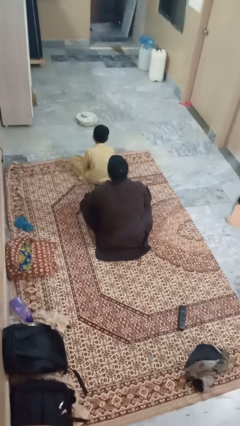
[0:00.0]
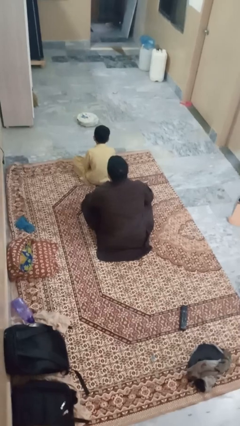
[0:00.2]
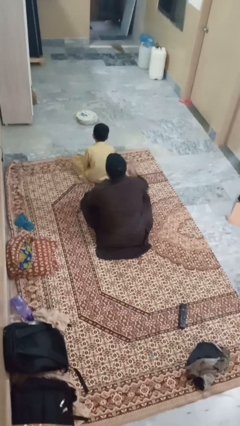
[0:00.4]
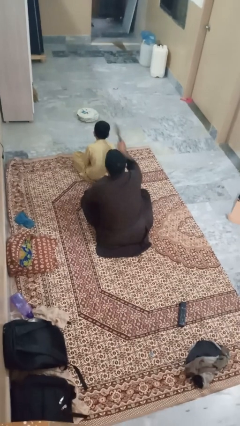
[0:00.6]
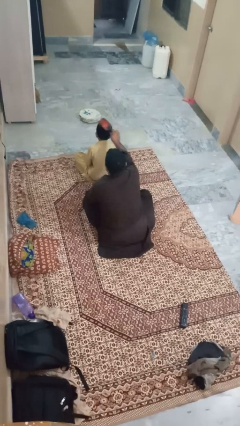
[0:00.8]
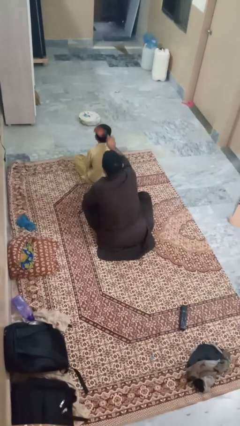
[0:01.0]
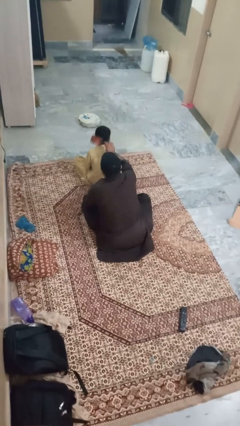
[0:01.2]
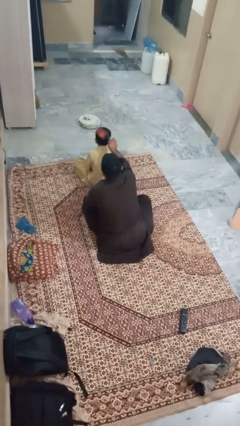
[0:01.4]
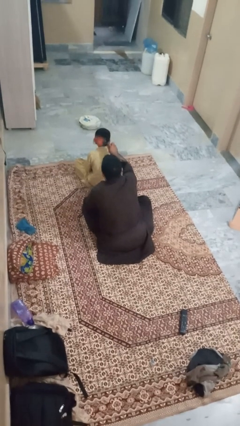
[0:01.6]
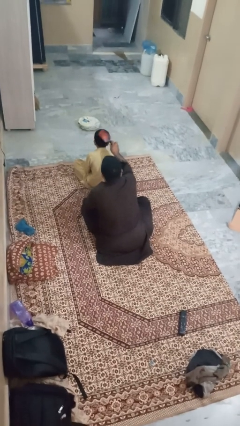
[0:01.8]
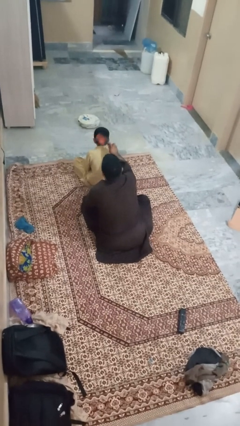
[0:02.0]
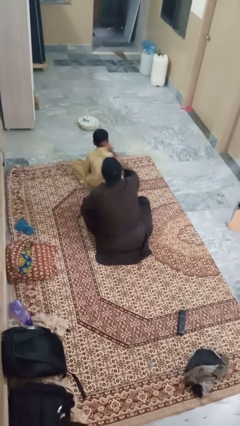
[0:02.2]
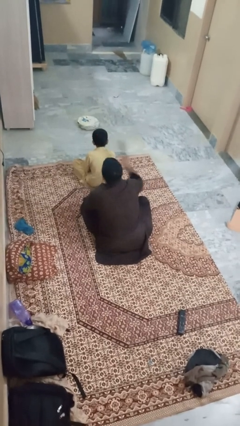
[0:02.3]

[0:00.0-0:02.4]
person brushes hair of person

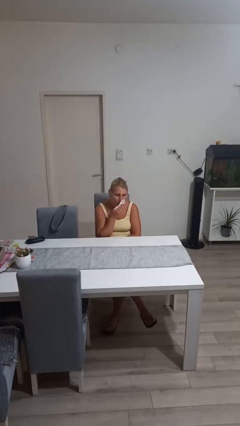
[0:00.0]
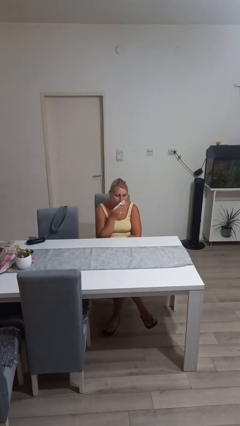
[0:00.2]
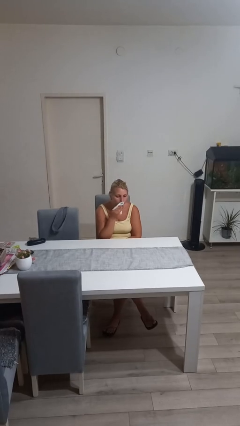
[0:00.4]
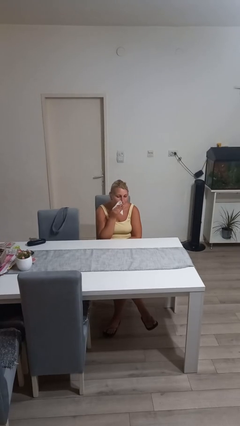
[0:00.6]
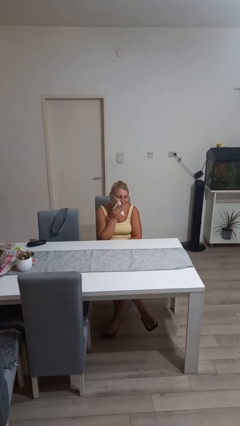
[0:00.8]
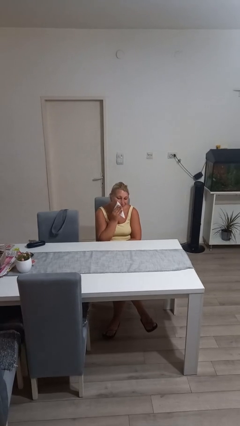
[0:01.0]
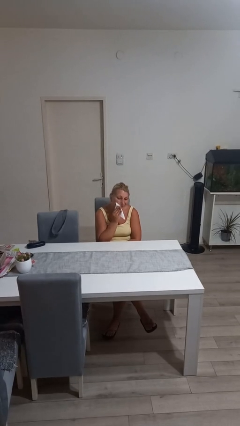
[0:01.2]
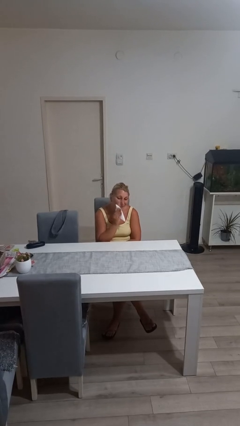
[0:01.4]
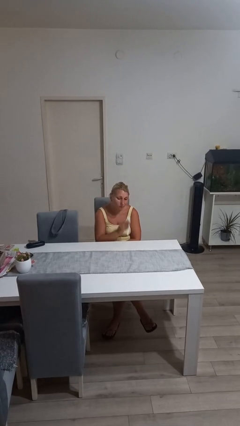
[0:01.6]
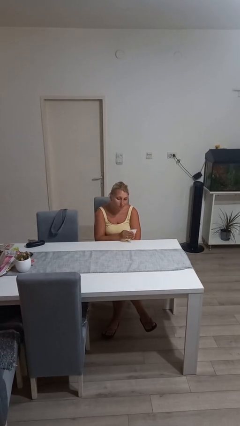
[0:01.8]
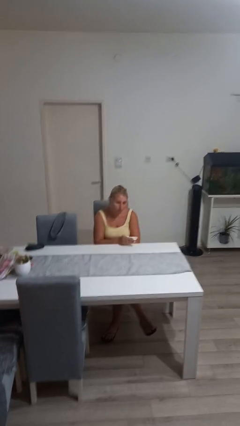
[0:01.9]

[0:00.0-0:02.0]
person wipes mouth with napkin

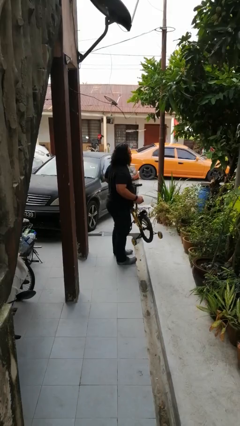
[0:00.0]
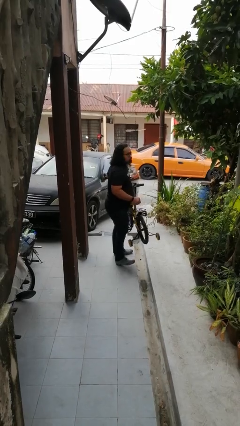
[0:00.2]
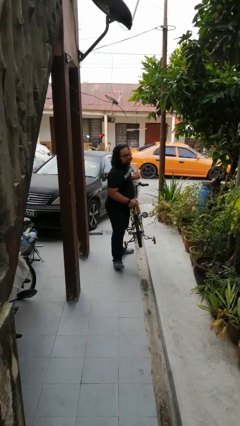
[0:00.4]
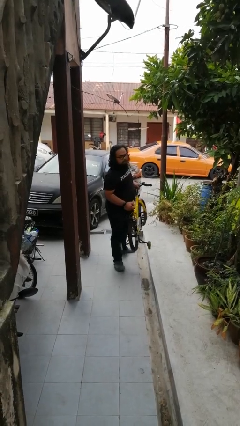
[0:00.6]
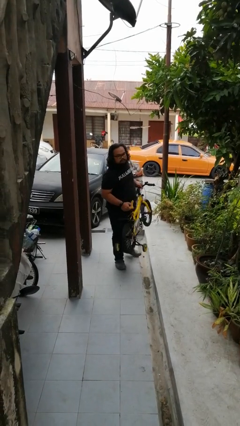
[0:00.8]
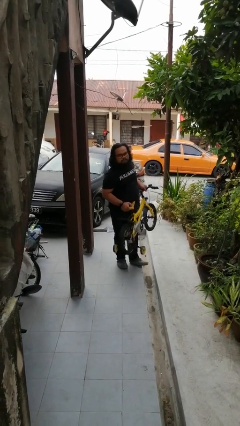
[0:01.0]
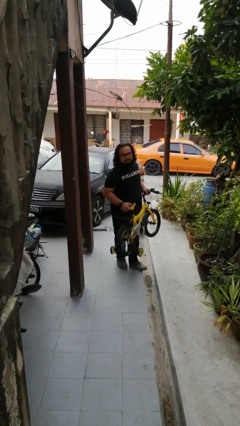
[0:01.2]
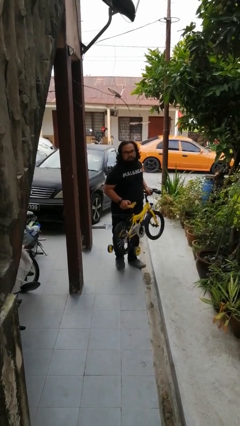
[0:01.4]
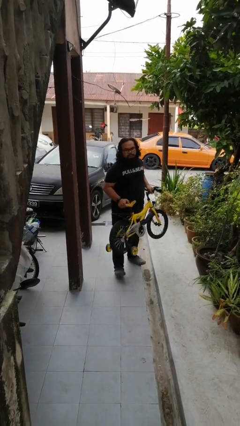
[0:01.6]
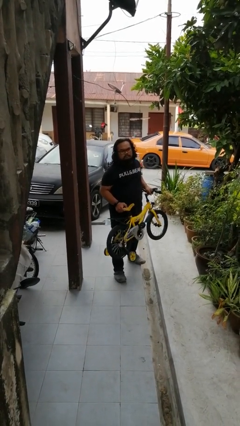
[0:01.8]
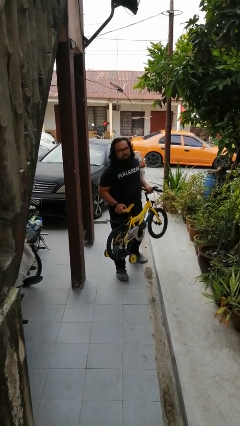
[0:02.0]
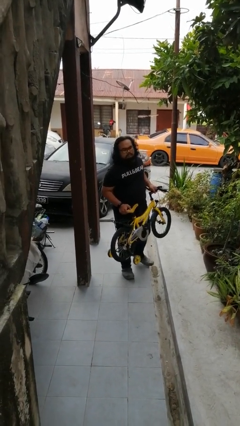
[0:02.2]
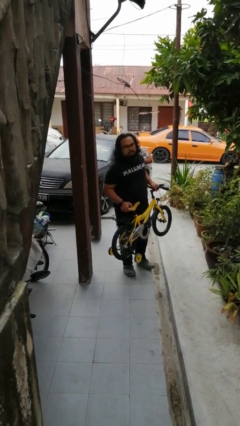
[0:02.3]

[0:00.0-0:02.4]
person carries bicycle

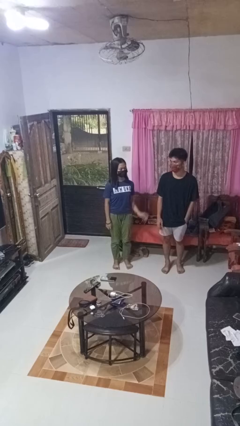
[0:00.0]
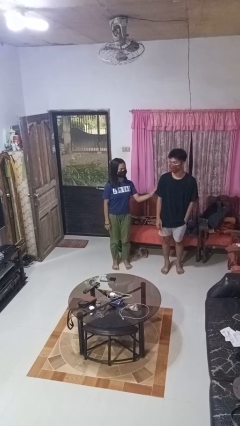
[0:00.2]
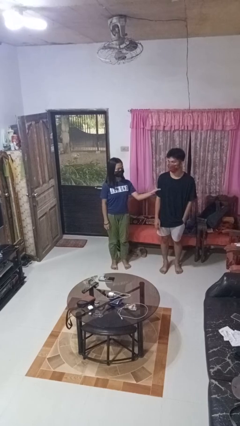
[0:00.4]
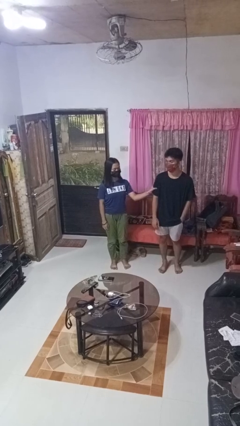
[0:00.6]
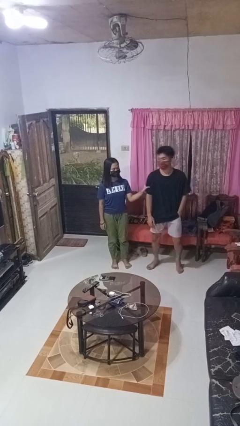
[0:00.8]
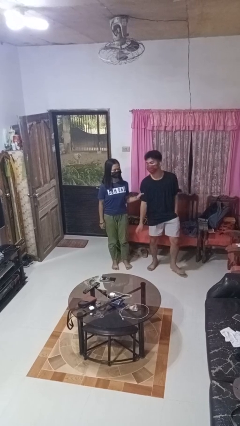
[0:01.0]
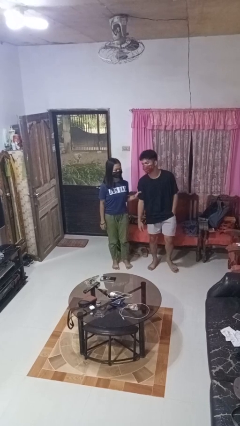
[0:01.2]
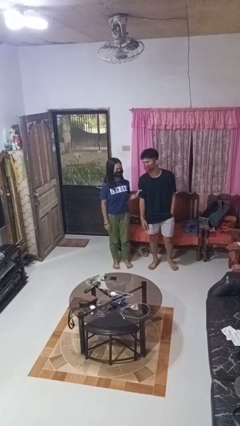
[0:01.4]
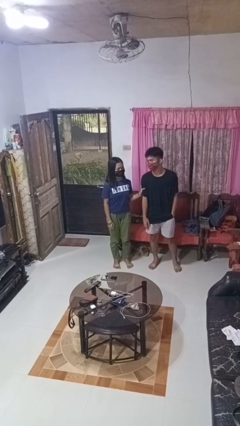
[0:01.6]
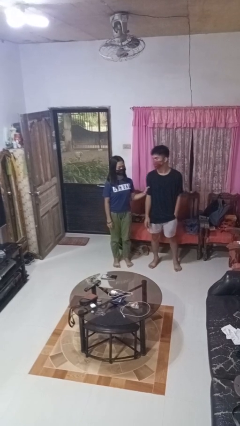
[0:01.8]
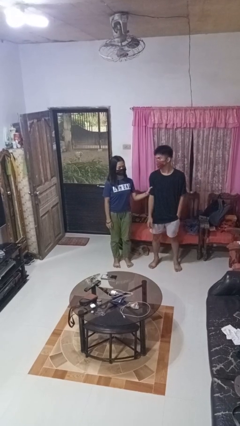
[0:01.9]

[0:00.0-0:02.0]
person grabs person by bicep

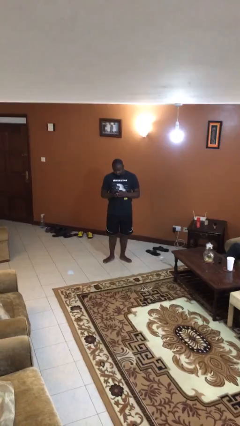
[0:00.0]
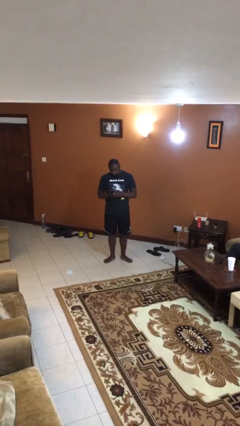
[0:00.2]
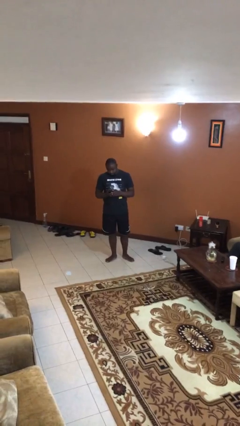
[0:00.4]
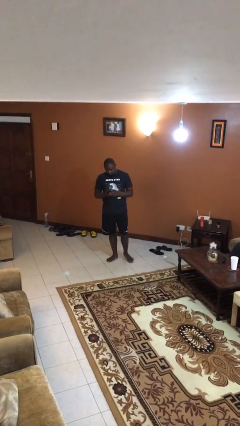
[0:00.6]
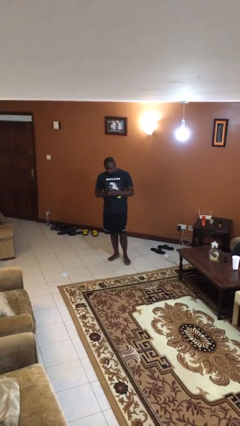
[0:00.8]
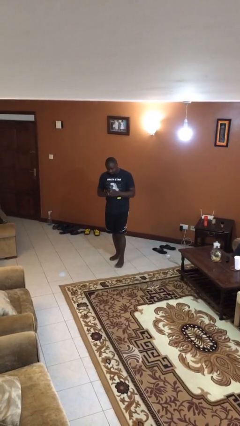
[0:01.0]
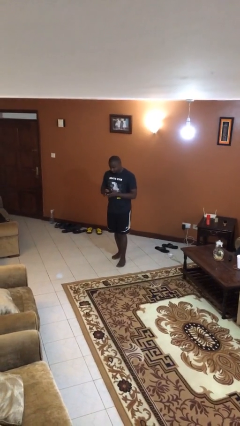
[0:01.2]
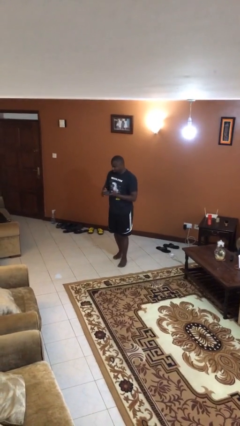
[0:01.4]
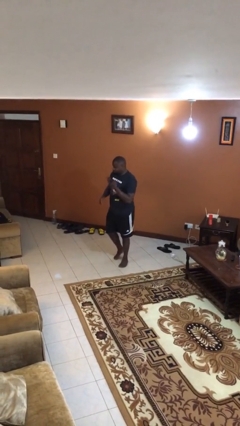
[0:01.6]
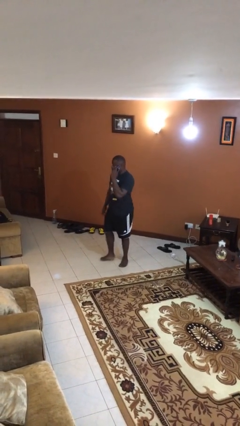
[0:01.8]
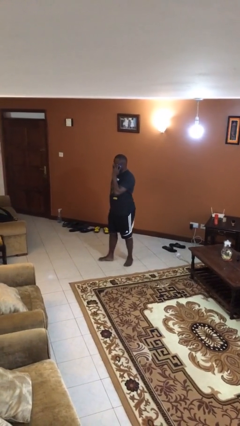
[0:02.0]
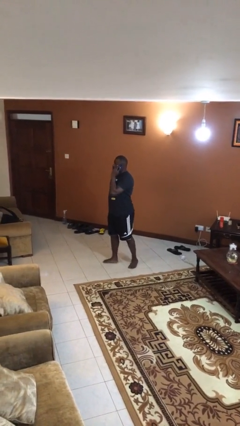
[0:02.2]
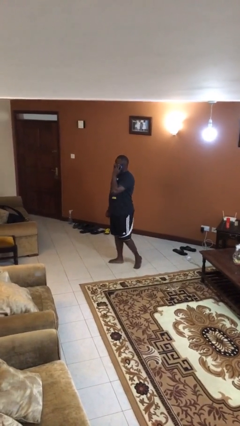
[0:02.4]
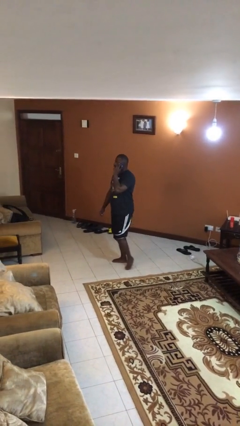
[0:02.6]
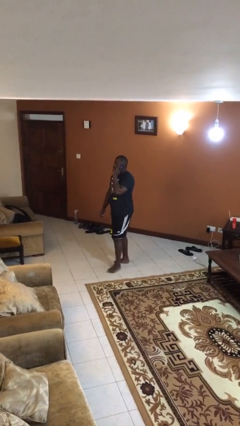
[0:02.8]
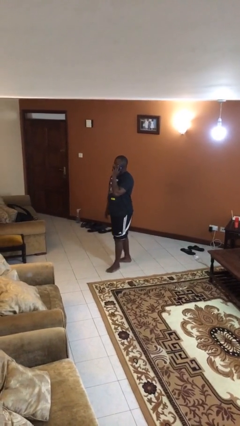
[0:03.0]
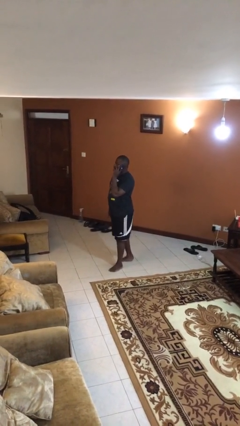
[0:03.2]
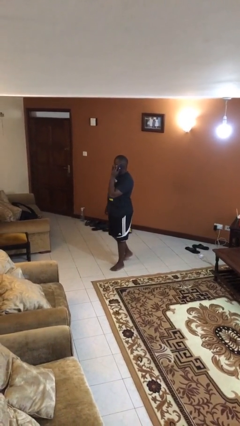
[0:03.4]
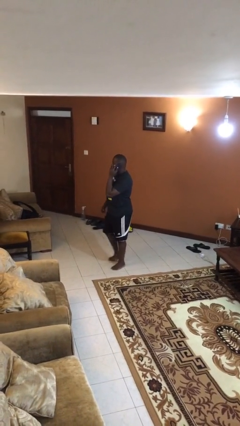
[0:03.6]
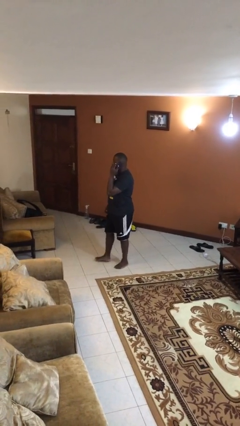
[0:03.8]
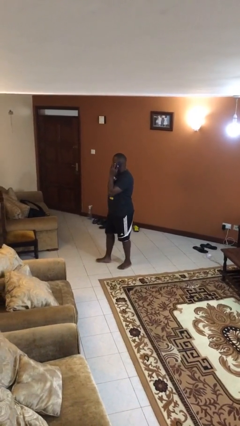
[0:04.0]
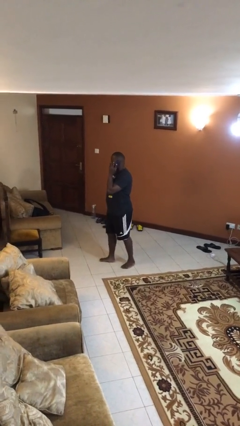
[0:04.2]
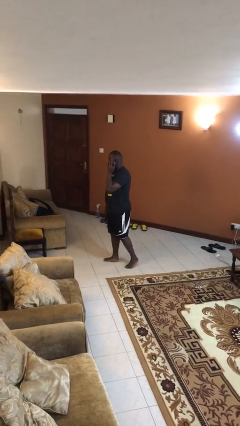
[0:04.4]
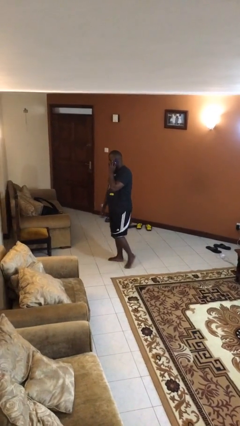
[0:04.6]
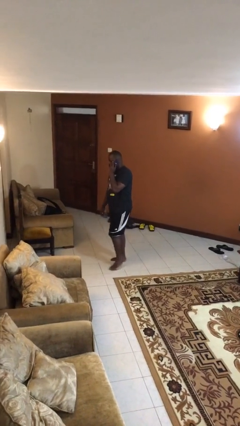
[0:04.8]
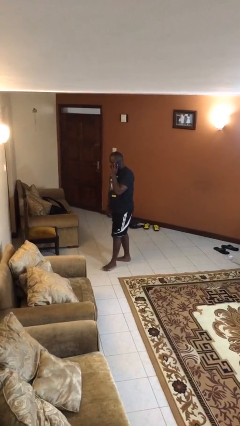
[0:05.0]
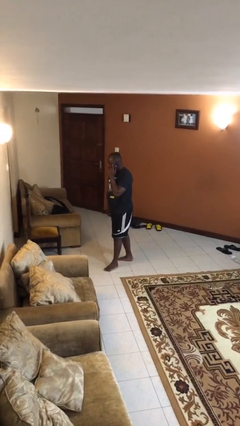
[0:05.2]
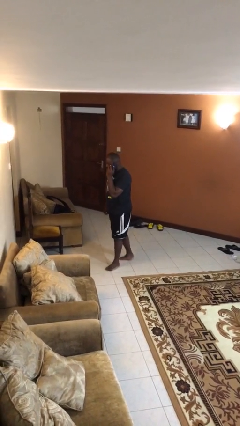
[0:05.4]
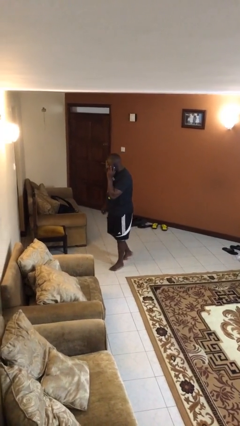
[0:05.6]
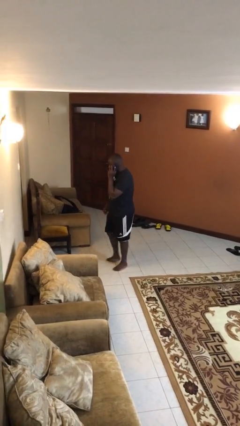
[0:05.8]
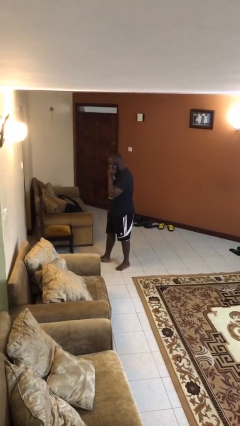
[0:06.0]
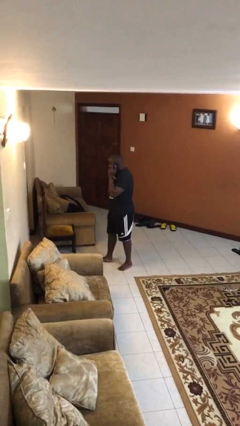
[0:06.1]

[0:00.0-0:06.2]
person talks on phone

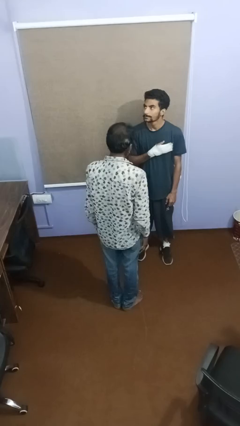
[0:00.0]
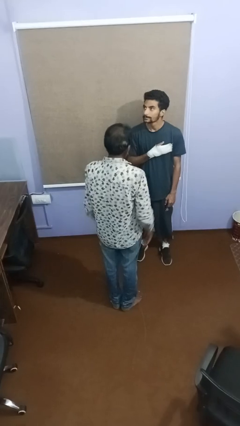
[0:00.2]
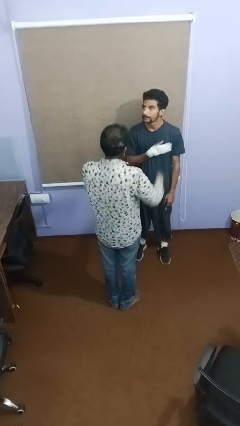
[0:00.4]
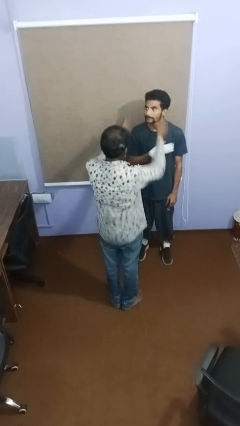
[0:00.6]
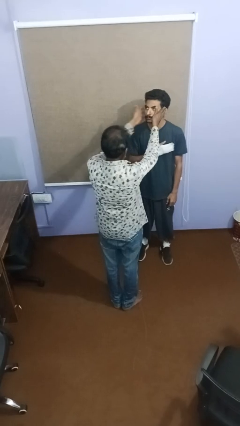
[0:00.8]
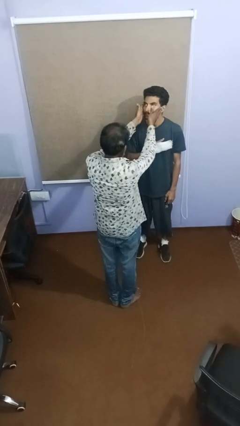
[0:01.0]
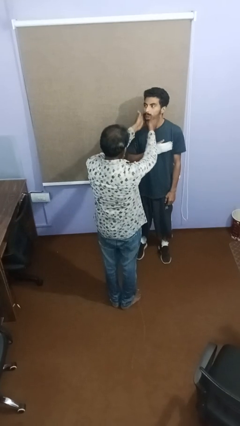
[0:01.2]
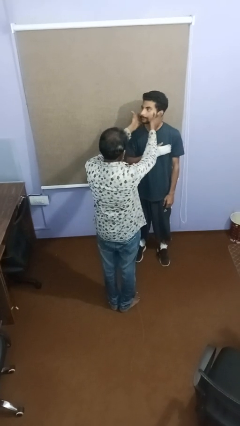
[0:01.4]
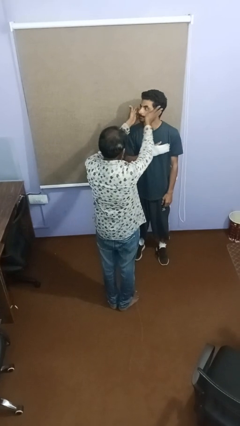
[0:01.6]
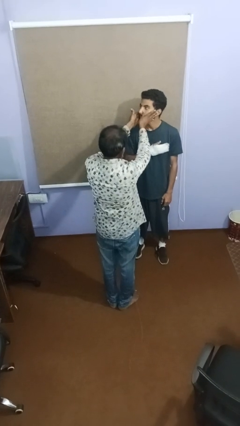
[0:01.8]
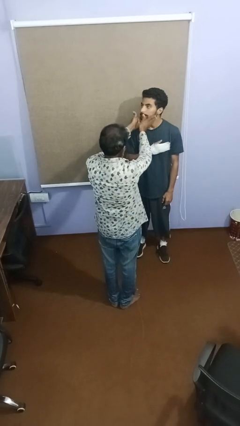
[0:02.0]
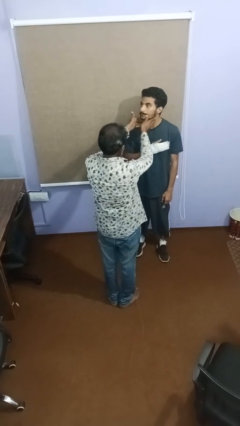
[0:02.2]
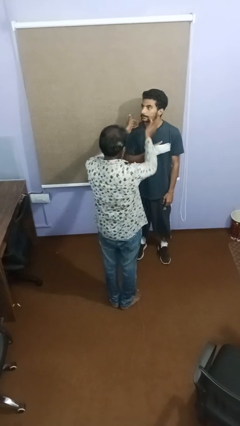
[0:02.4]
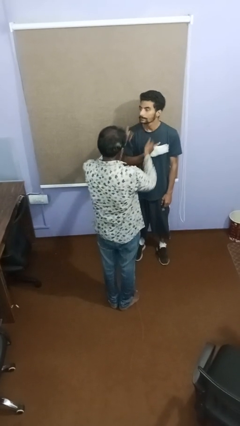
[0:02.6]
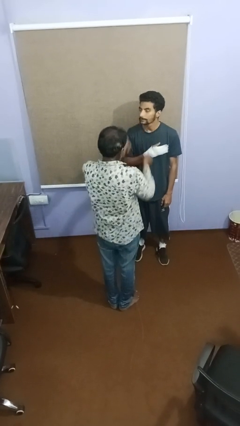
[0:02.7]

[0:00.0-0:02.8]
person touches face of person
